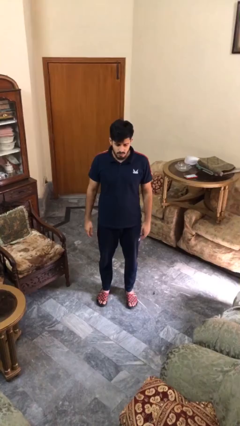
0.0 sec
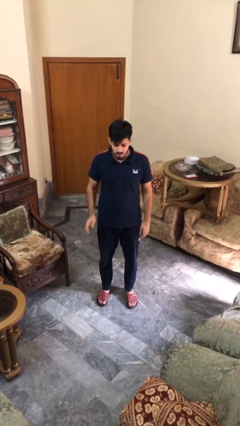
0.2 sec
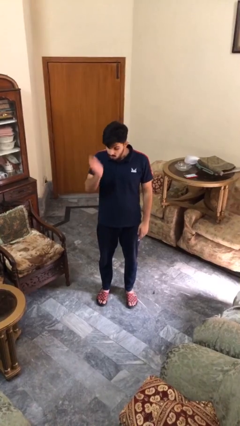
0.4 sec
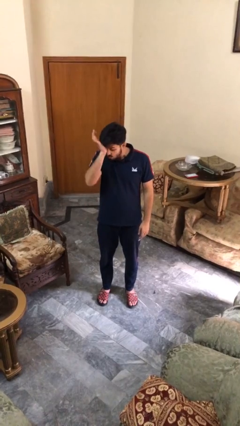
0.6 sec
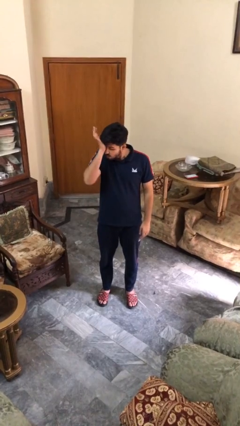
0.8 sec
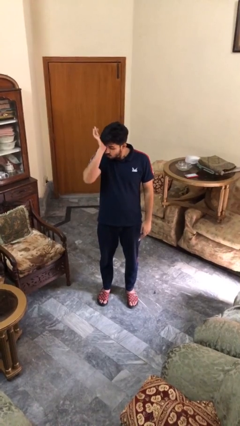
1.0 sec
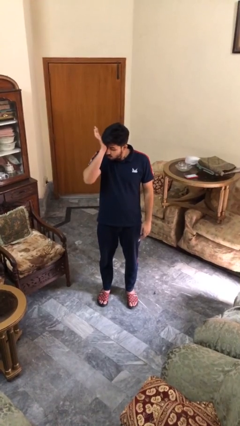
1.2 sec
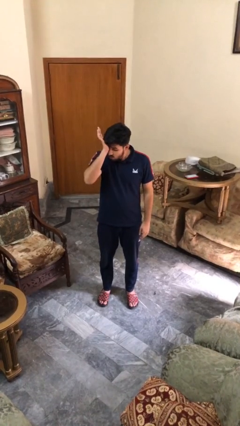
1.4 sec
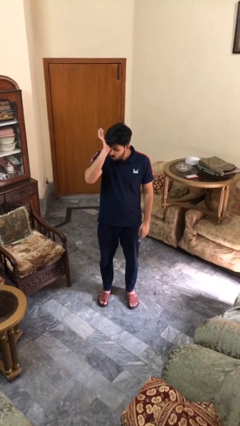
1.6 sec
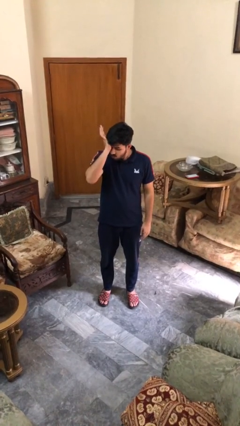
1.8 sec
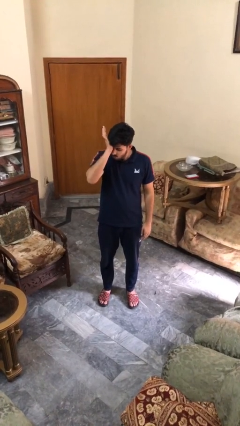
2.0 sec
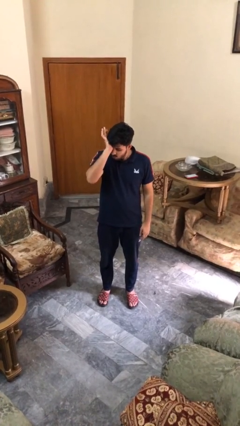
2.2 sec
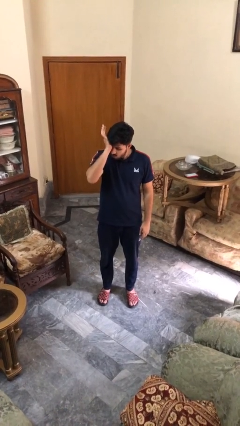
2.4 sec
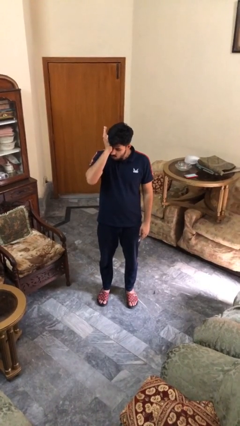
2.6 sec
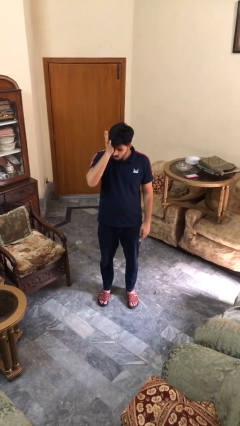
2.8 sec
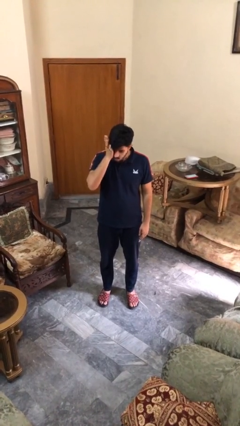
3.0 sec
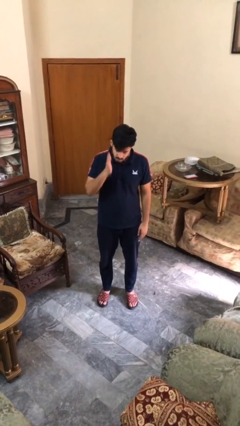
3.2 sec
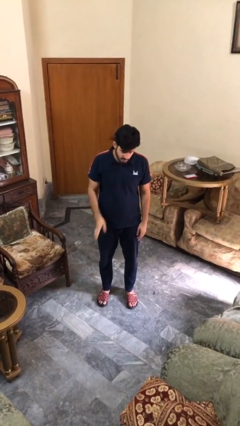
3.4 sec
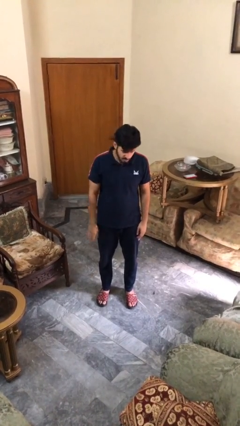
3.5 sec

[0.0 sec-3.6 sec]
person rubs eyes

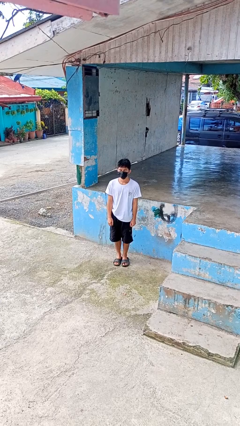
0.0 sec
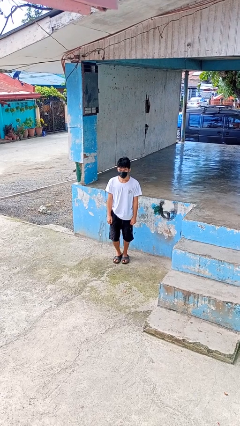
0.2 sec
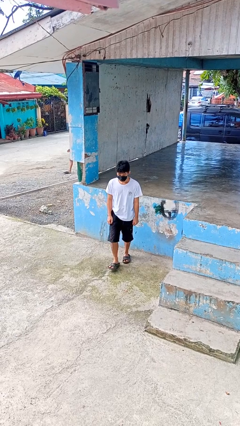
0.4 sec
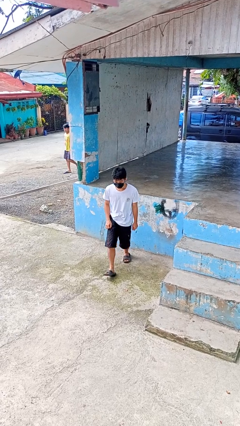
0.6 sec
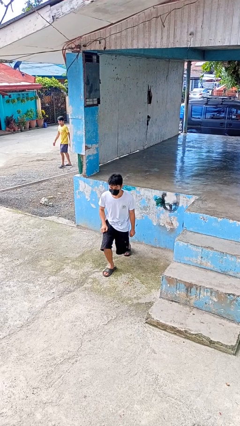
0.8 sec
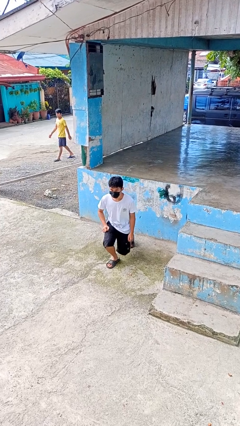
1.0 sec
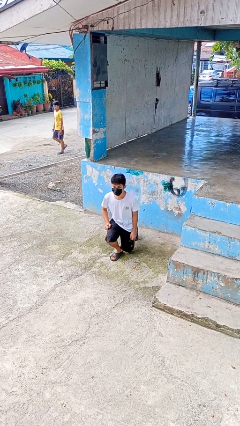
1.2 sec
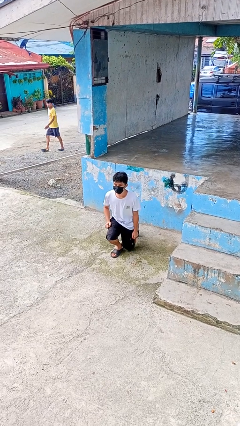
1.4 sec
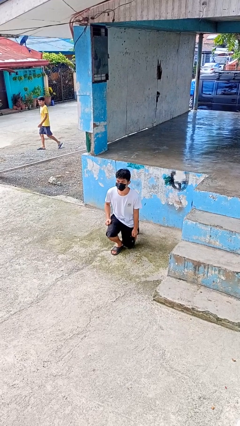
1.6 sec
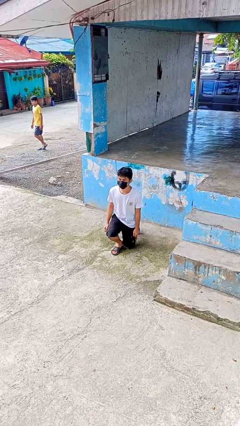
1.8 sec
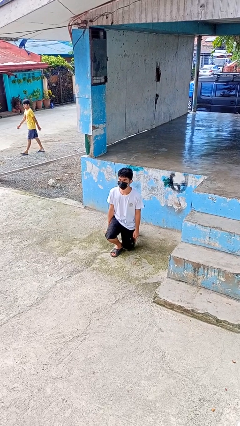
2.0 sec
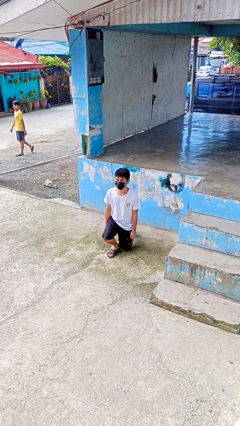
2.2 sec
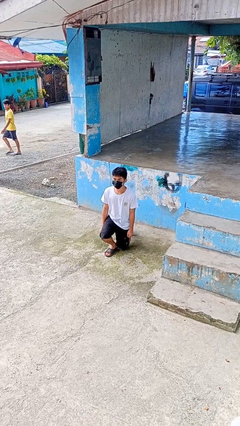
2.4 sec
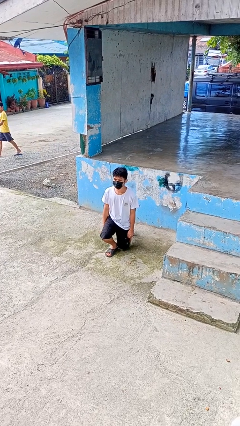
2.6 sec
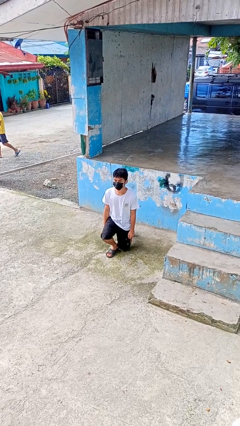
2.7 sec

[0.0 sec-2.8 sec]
person kneels

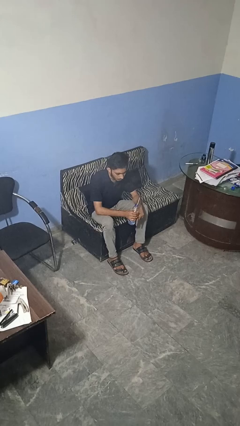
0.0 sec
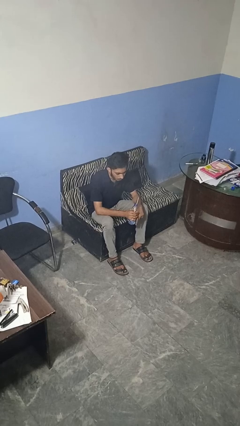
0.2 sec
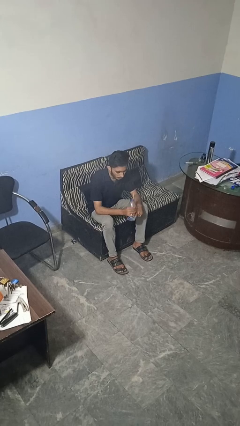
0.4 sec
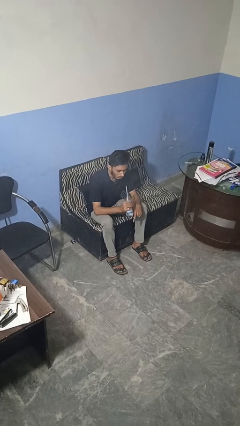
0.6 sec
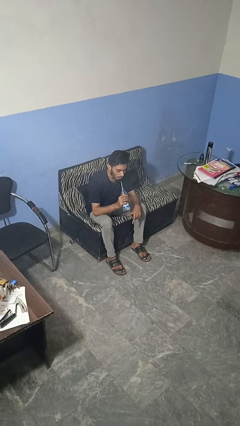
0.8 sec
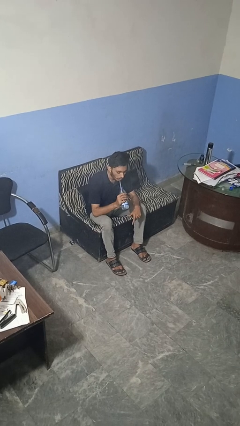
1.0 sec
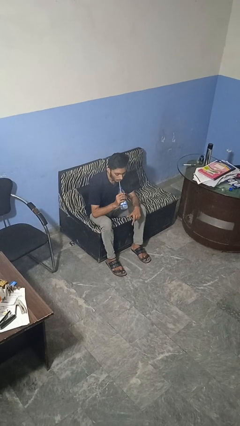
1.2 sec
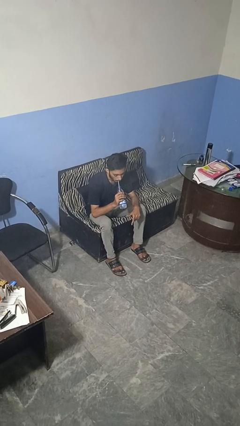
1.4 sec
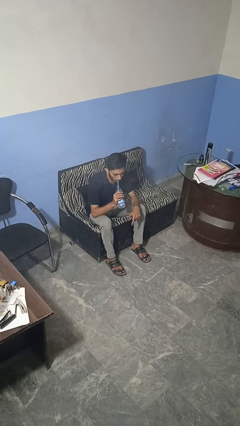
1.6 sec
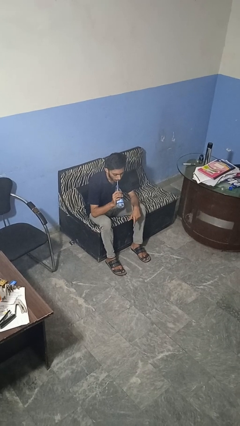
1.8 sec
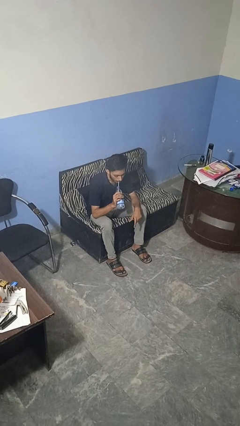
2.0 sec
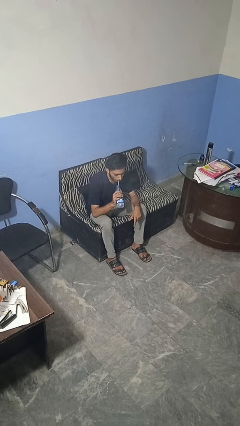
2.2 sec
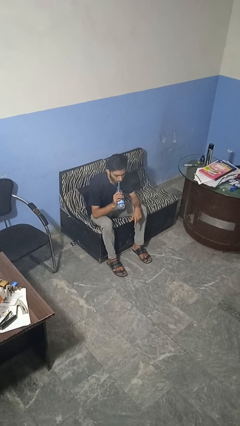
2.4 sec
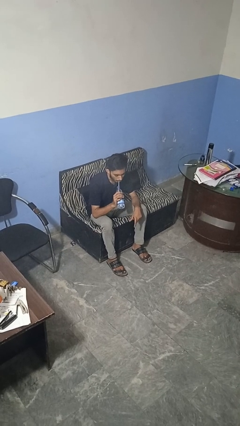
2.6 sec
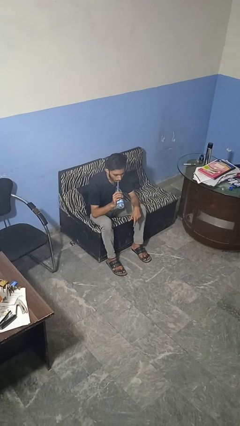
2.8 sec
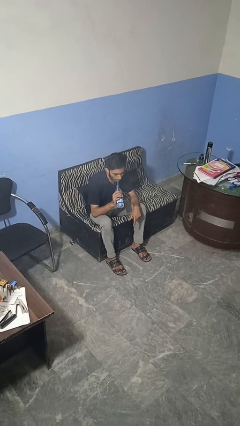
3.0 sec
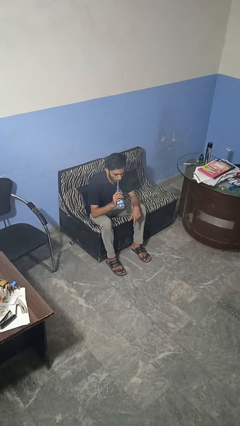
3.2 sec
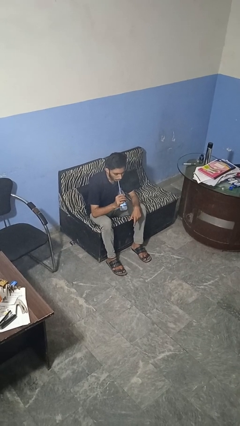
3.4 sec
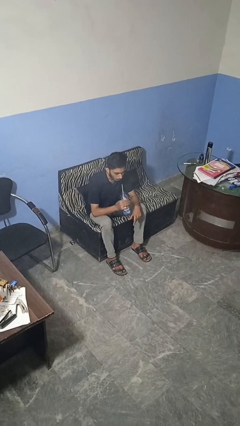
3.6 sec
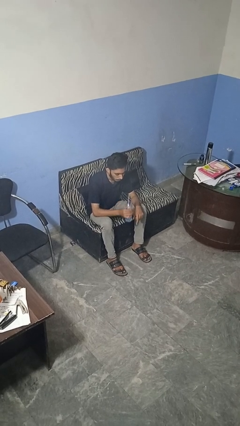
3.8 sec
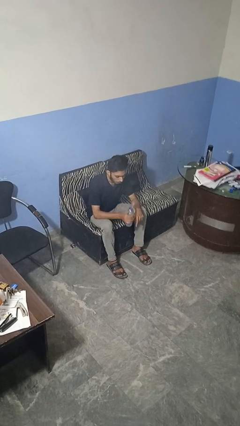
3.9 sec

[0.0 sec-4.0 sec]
person drinks from straw

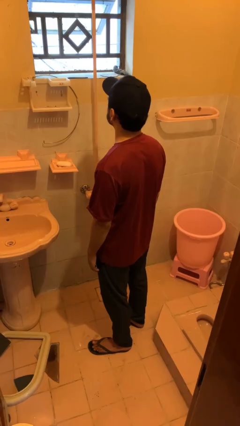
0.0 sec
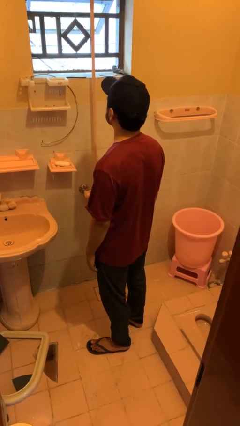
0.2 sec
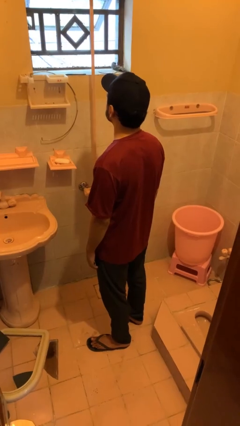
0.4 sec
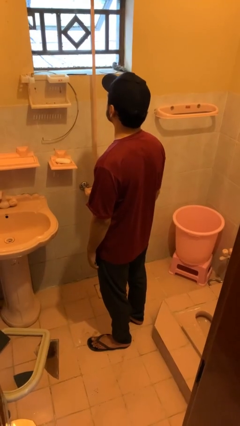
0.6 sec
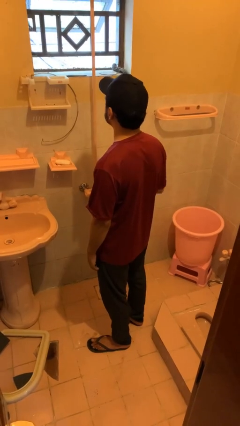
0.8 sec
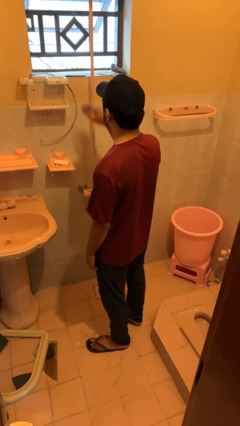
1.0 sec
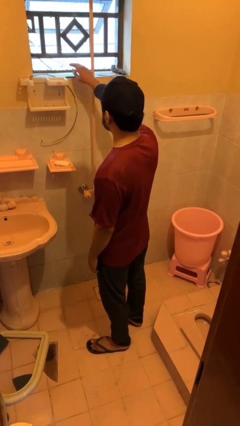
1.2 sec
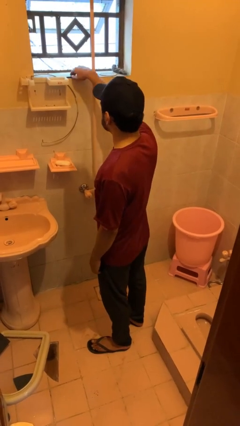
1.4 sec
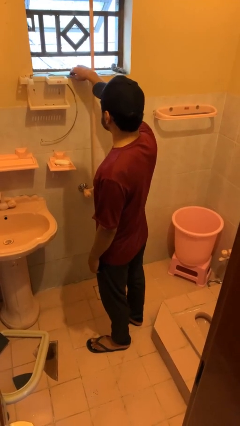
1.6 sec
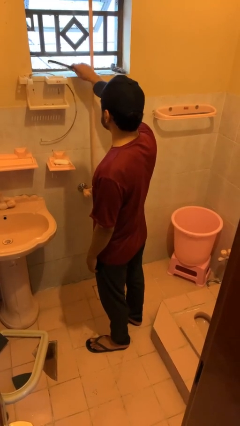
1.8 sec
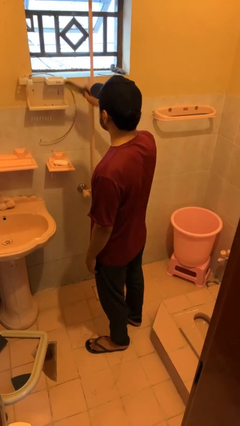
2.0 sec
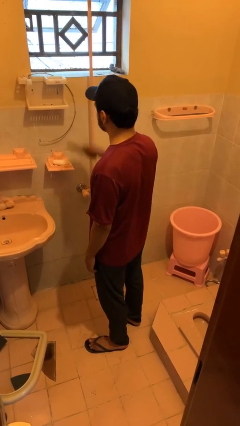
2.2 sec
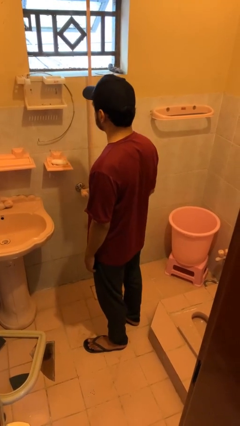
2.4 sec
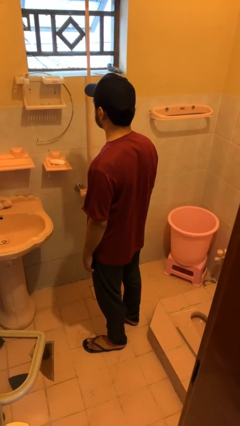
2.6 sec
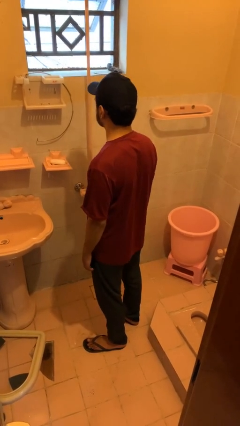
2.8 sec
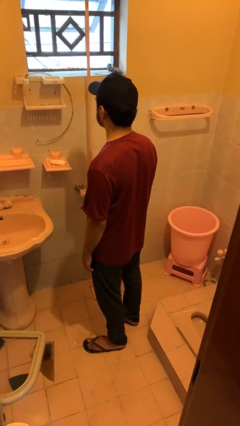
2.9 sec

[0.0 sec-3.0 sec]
person picks up object from countertop

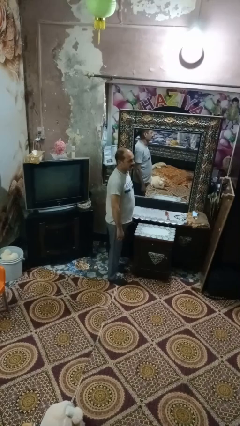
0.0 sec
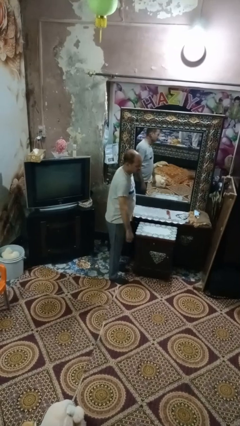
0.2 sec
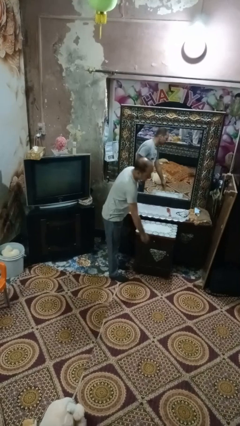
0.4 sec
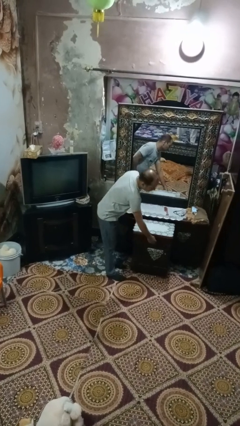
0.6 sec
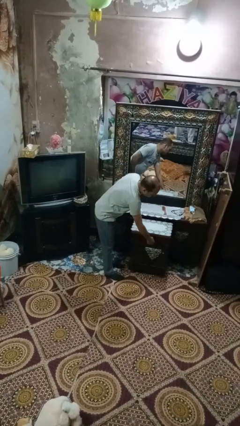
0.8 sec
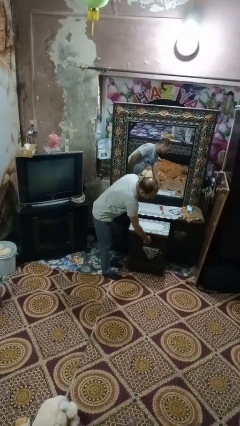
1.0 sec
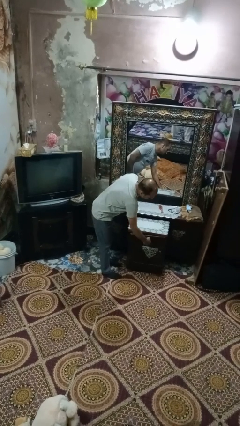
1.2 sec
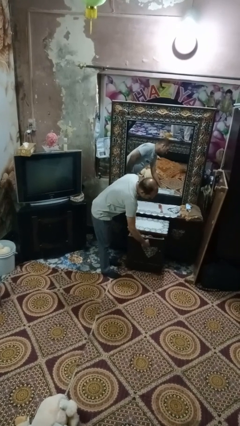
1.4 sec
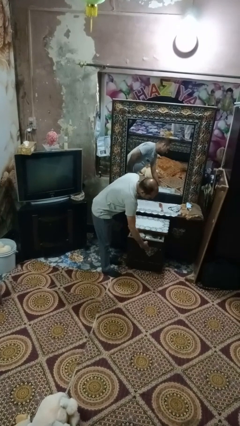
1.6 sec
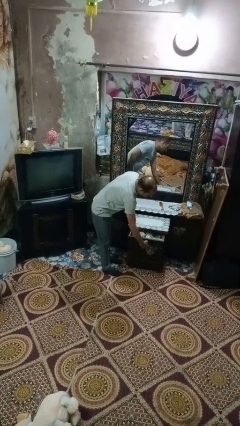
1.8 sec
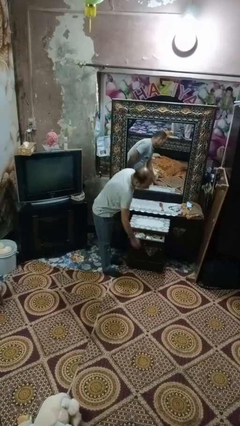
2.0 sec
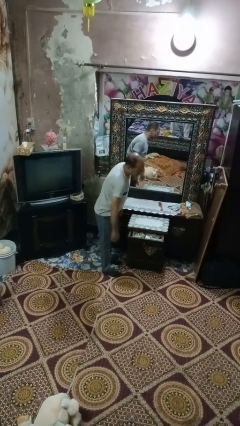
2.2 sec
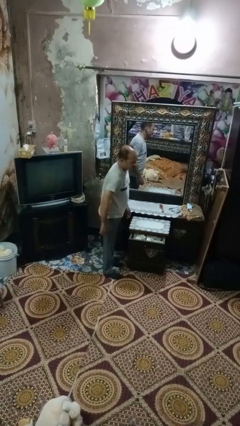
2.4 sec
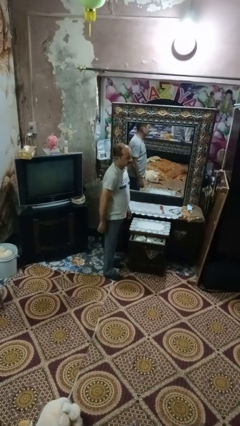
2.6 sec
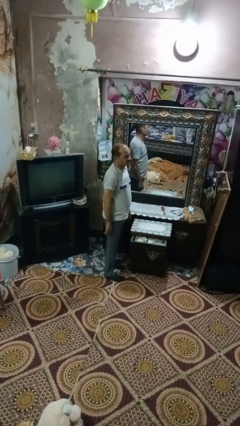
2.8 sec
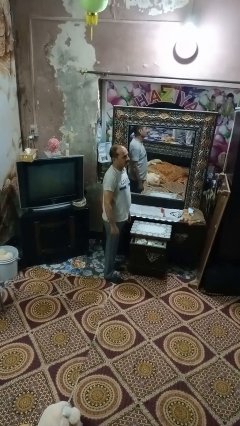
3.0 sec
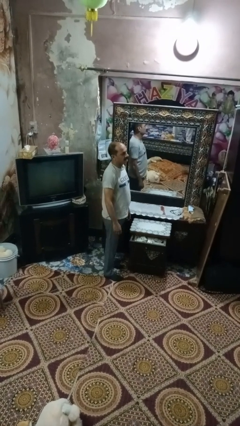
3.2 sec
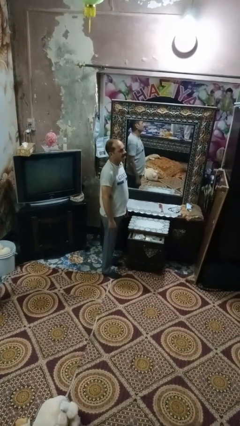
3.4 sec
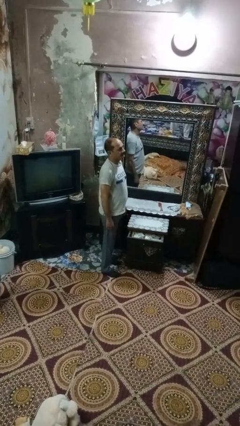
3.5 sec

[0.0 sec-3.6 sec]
person opens dresser drawer

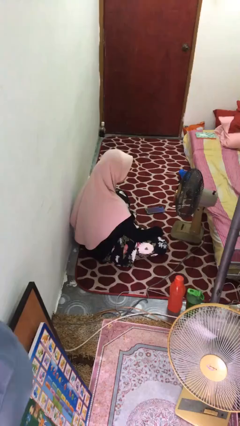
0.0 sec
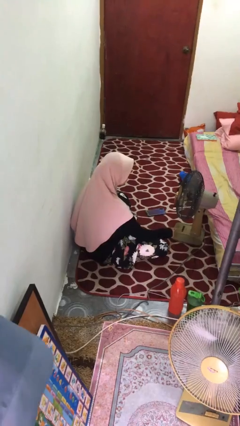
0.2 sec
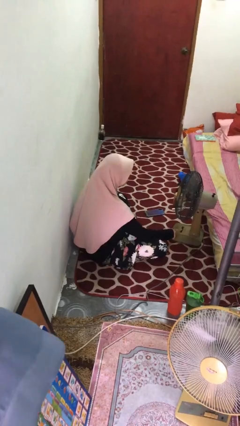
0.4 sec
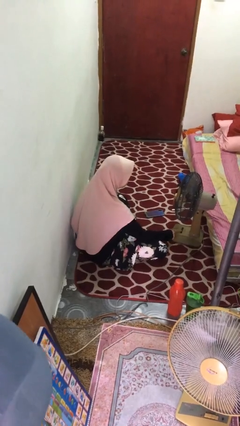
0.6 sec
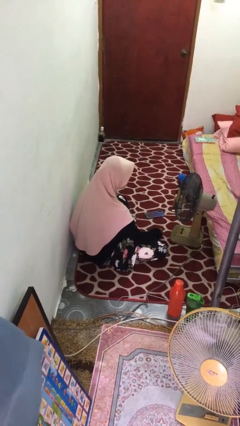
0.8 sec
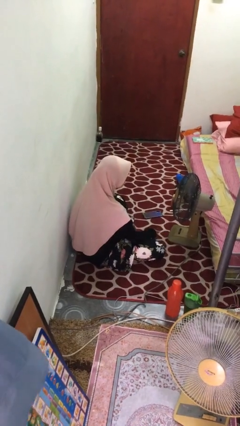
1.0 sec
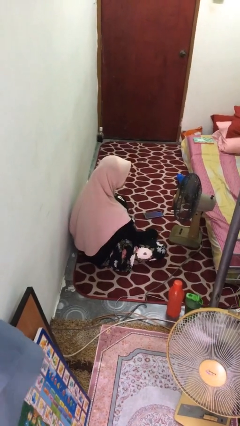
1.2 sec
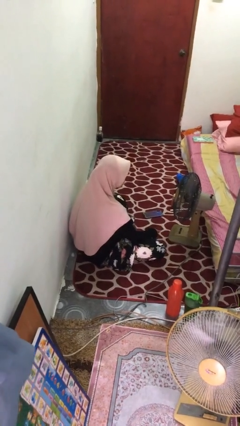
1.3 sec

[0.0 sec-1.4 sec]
person turns on fan
